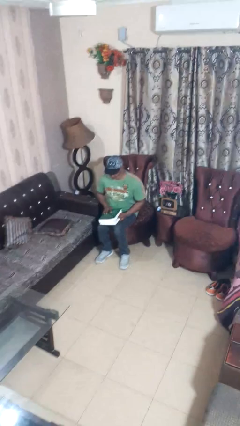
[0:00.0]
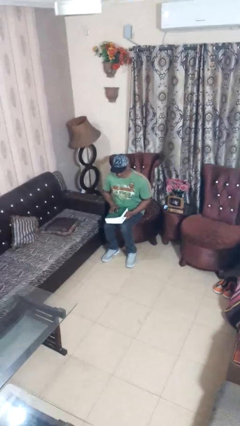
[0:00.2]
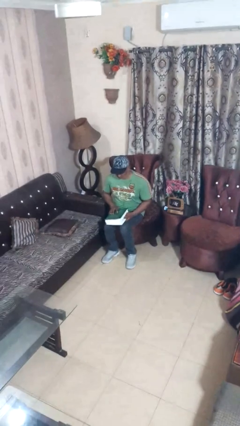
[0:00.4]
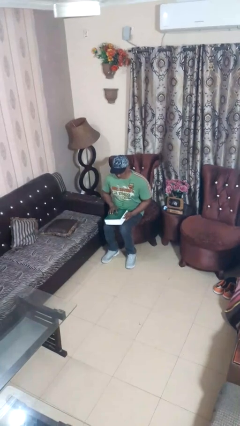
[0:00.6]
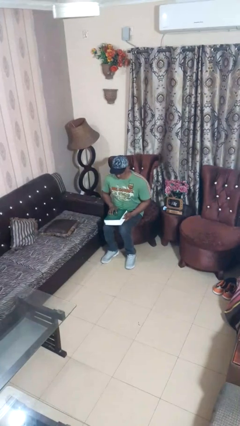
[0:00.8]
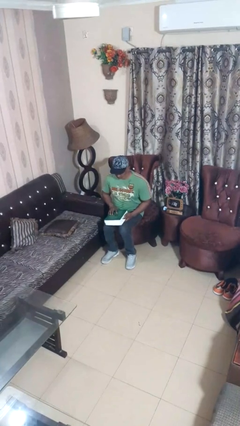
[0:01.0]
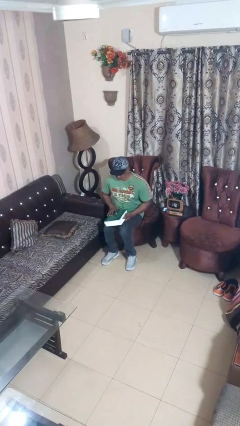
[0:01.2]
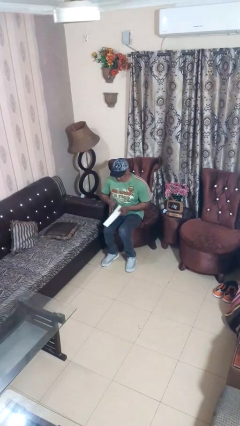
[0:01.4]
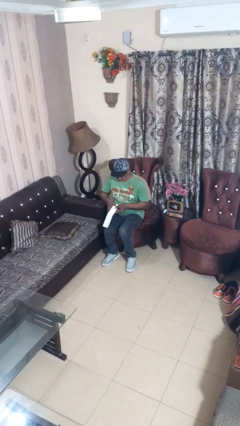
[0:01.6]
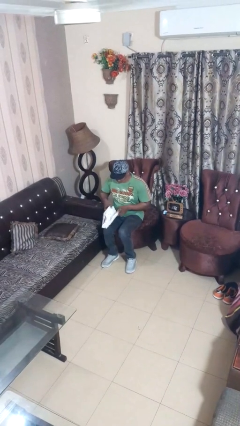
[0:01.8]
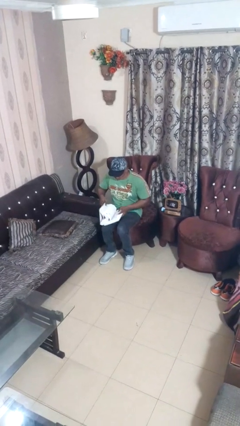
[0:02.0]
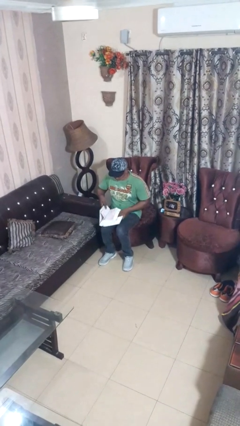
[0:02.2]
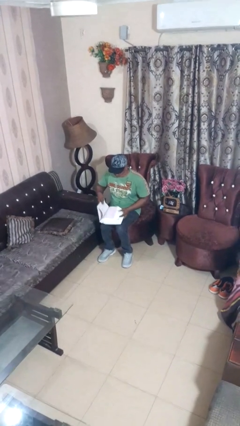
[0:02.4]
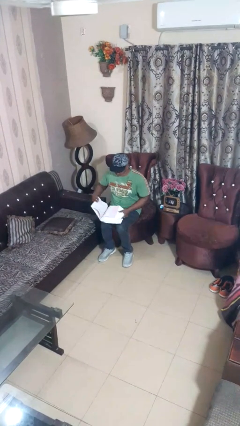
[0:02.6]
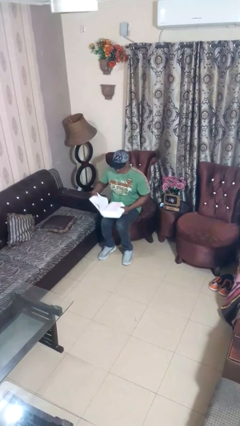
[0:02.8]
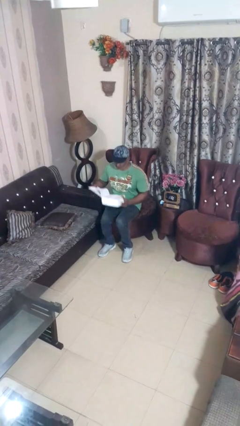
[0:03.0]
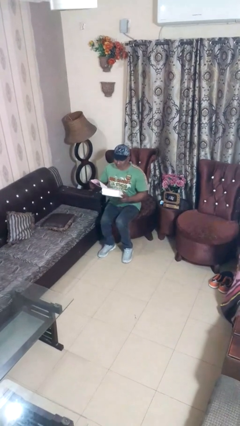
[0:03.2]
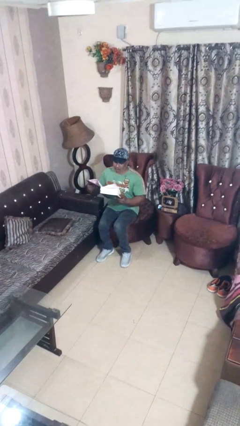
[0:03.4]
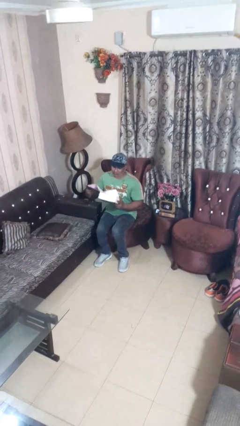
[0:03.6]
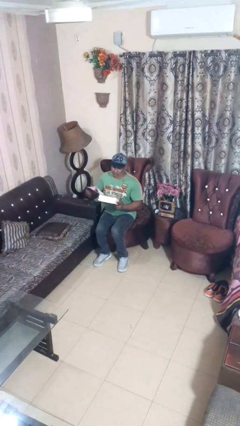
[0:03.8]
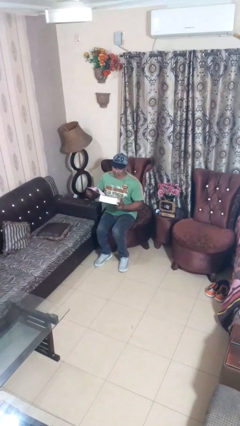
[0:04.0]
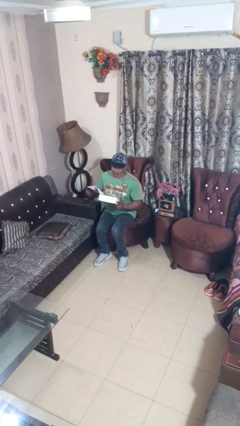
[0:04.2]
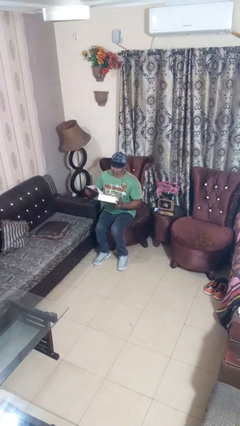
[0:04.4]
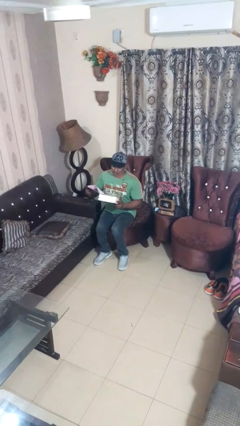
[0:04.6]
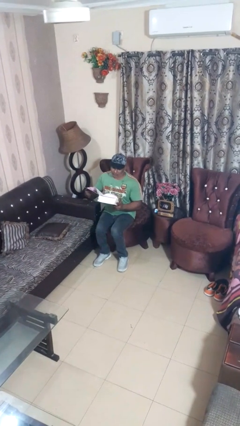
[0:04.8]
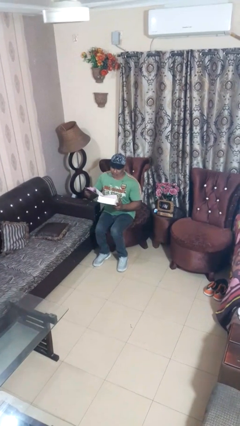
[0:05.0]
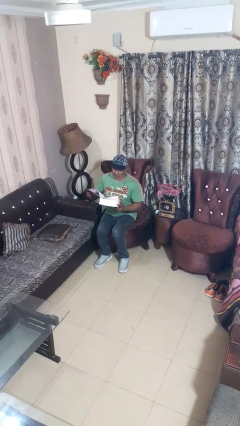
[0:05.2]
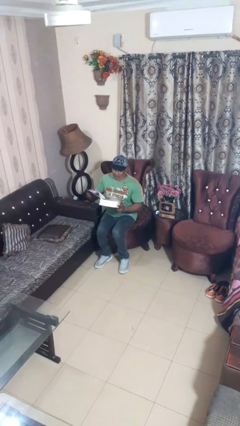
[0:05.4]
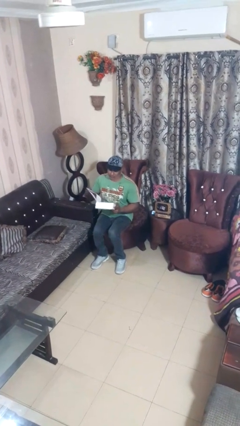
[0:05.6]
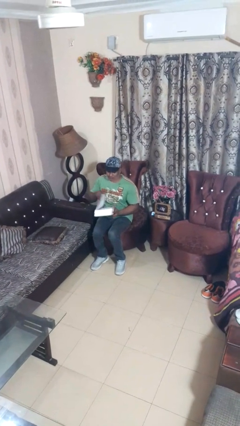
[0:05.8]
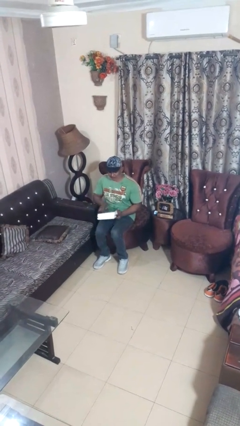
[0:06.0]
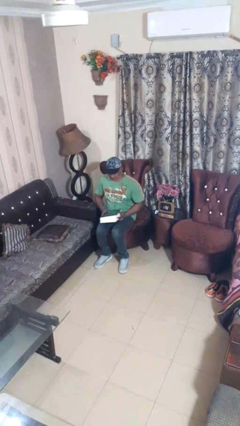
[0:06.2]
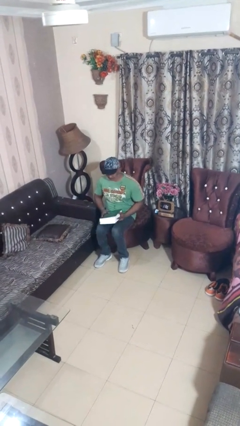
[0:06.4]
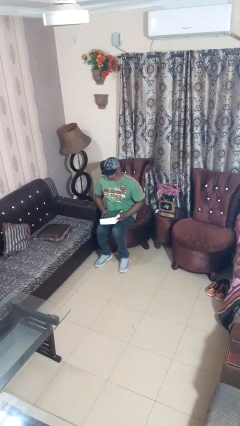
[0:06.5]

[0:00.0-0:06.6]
person reads book

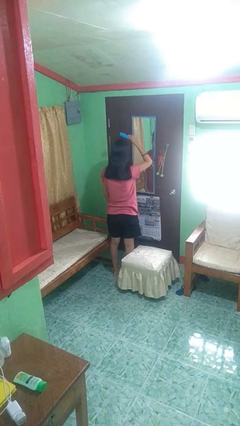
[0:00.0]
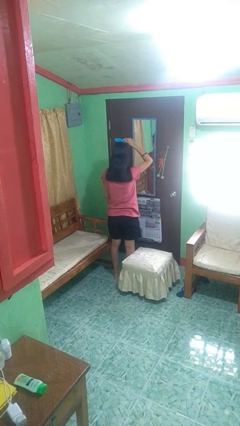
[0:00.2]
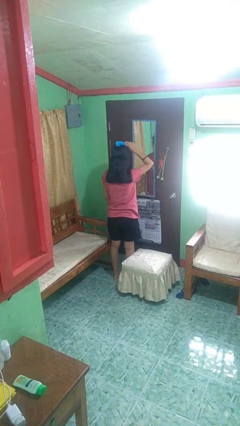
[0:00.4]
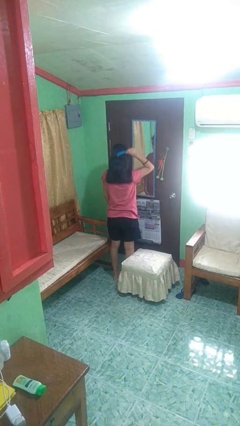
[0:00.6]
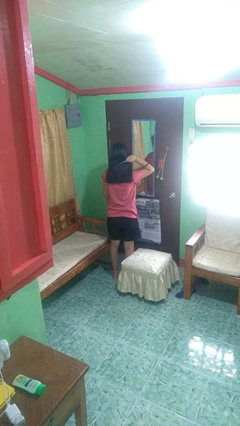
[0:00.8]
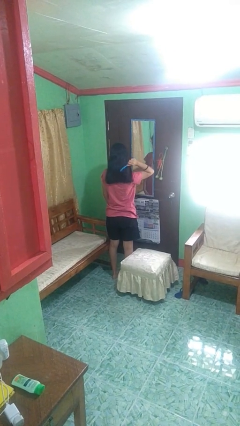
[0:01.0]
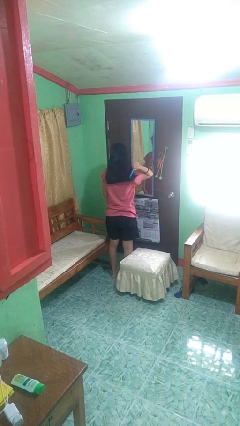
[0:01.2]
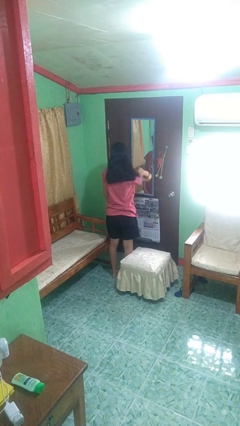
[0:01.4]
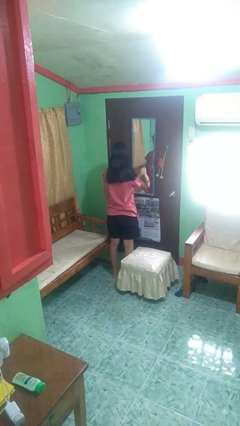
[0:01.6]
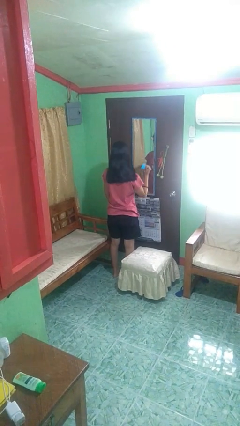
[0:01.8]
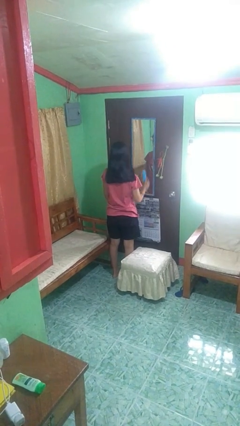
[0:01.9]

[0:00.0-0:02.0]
person brushes hair

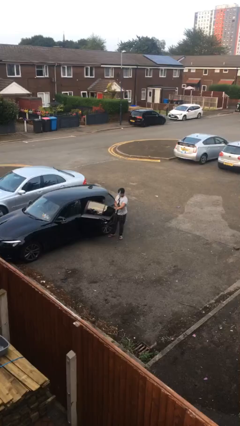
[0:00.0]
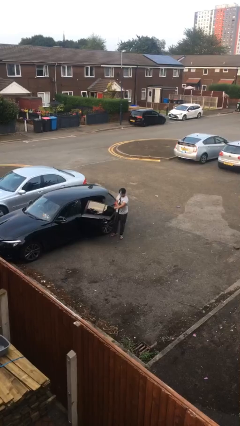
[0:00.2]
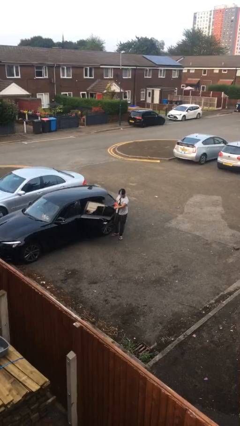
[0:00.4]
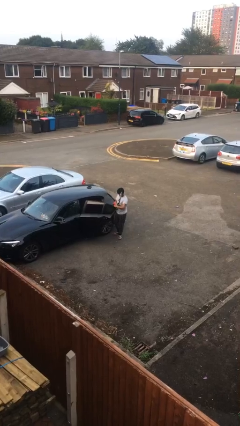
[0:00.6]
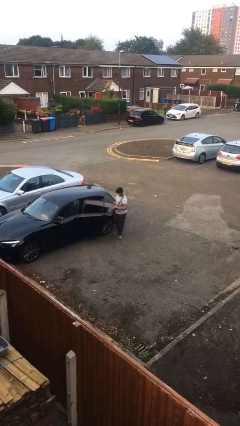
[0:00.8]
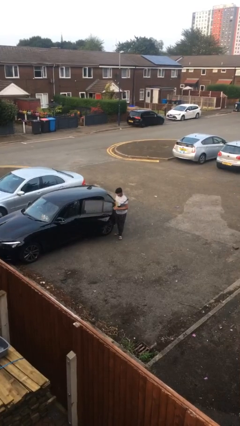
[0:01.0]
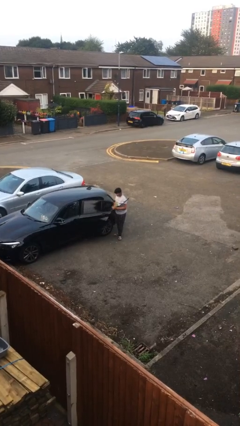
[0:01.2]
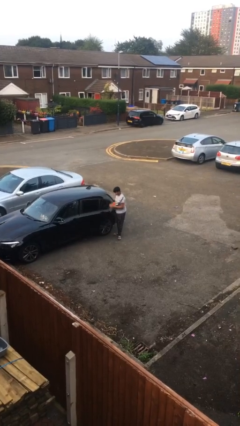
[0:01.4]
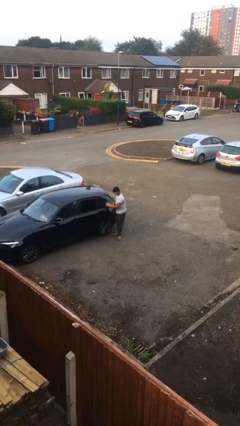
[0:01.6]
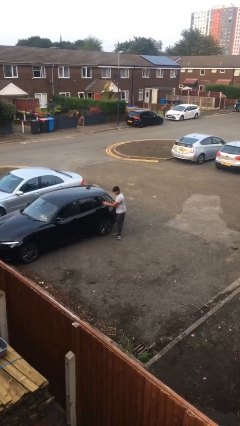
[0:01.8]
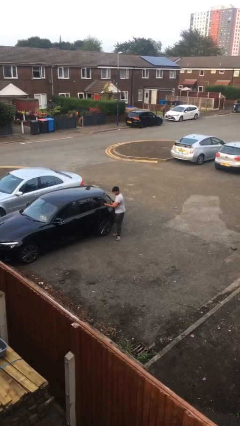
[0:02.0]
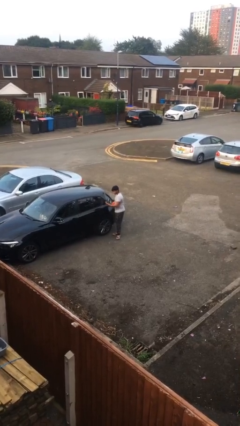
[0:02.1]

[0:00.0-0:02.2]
person closes car door

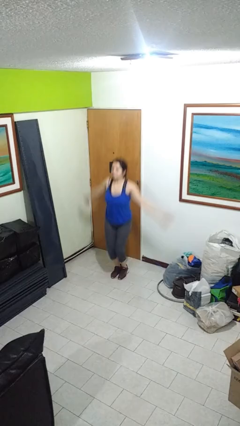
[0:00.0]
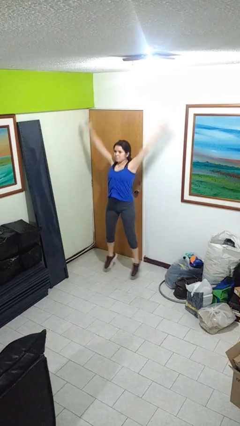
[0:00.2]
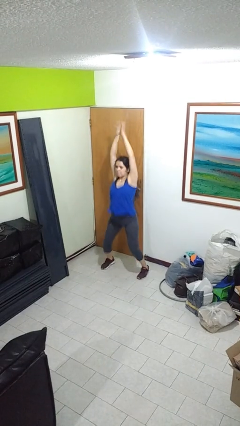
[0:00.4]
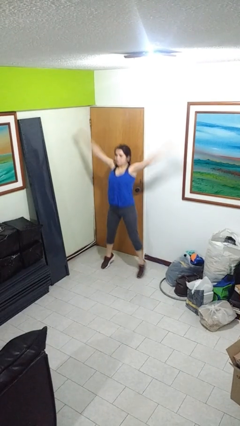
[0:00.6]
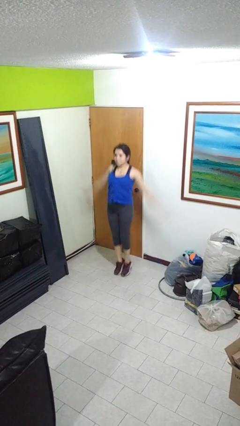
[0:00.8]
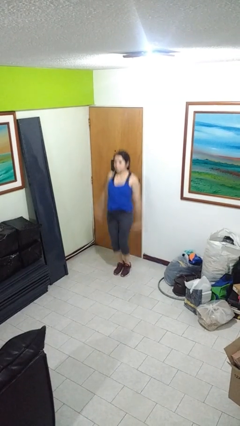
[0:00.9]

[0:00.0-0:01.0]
person exercises with jumping jacks

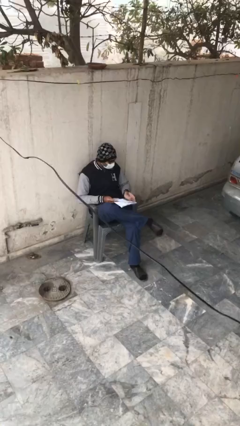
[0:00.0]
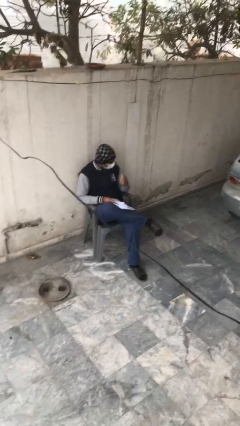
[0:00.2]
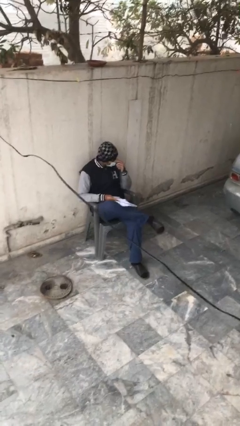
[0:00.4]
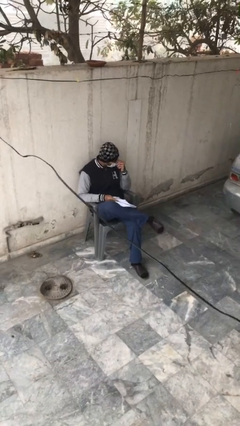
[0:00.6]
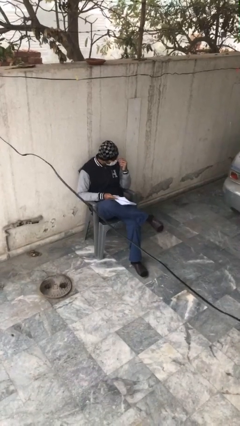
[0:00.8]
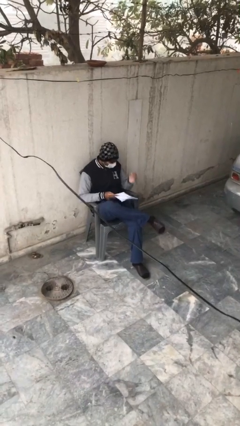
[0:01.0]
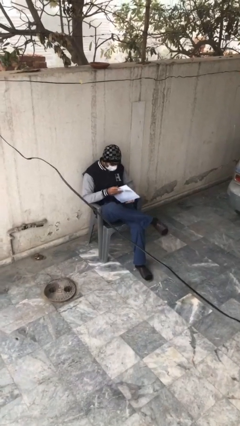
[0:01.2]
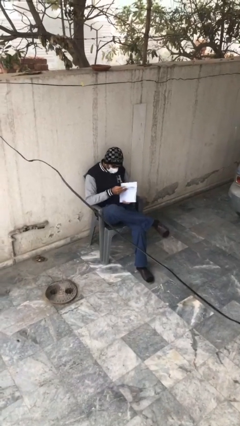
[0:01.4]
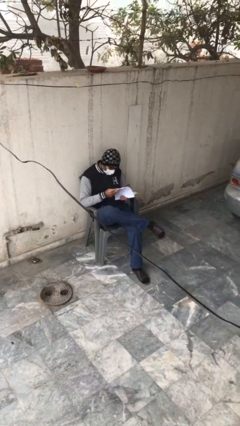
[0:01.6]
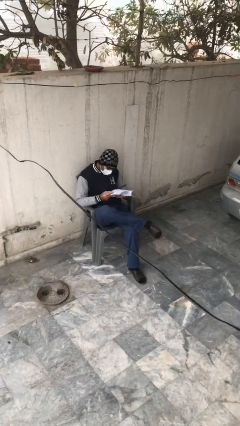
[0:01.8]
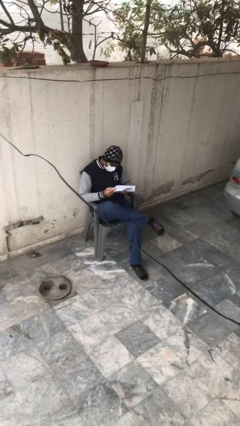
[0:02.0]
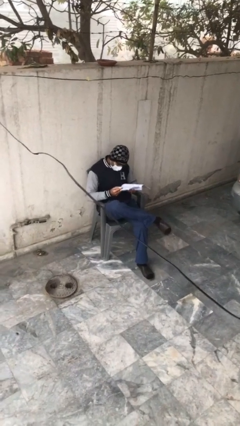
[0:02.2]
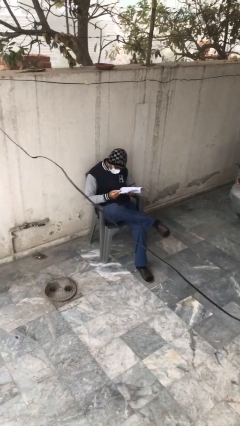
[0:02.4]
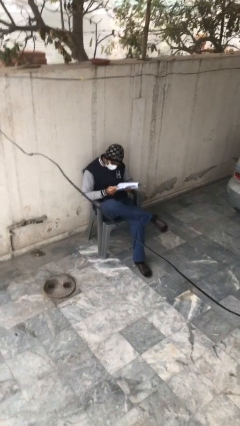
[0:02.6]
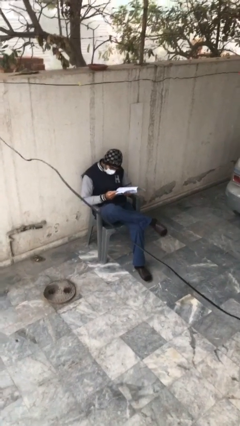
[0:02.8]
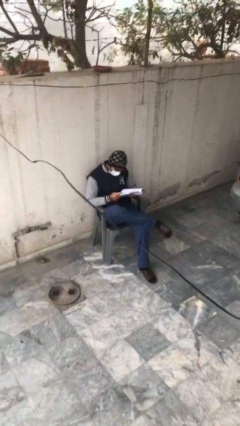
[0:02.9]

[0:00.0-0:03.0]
person reads document

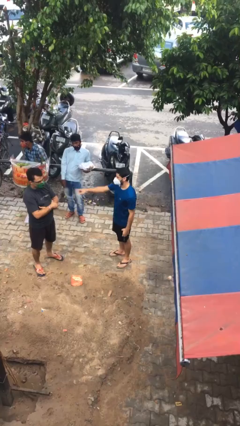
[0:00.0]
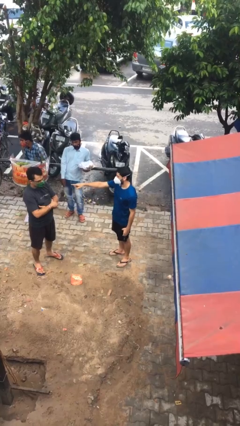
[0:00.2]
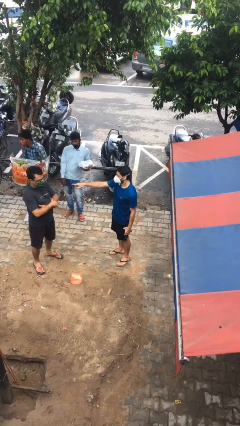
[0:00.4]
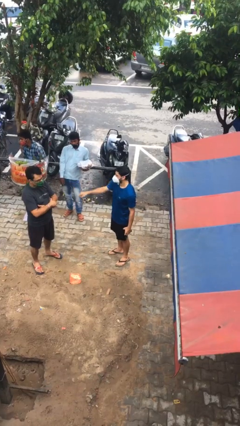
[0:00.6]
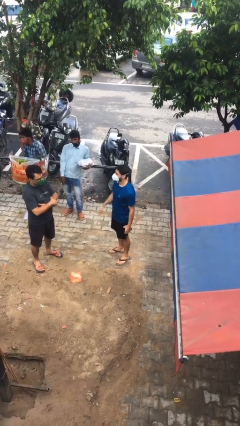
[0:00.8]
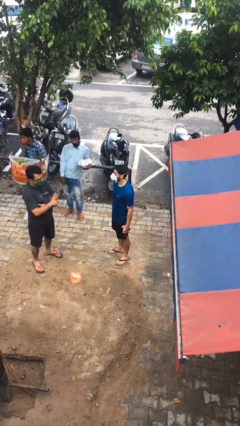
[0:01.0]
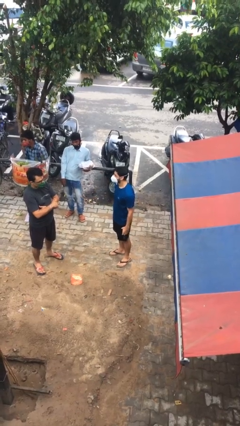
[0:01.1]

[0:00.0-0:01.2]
person points at person

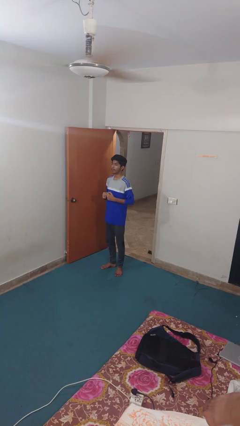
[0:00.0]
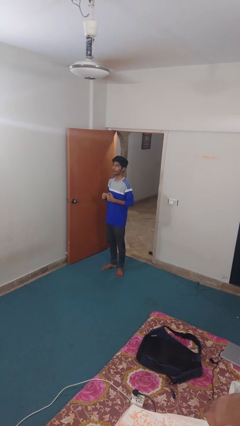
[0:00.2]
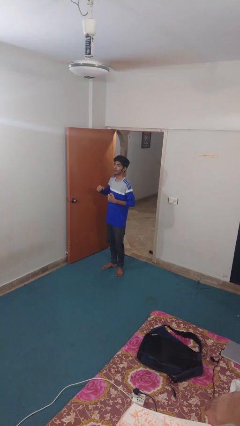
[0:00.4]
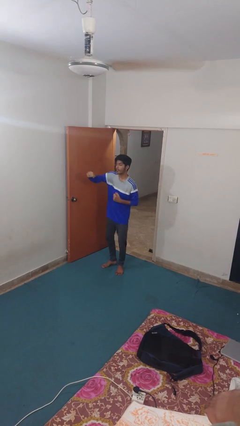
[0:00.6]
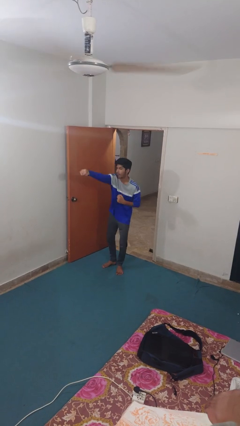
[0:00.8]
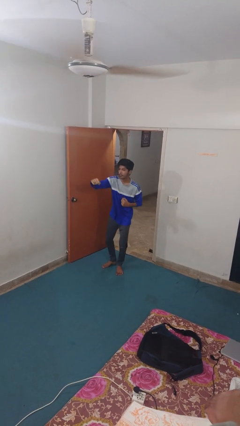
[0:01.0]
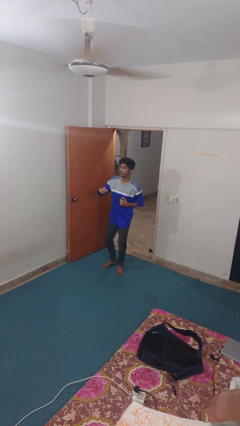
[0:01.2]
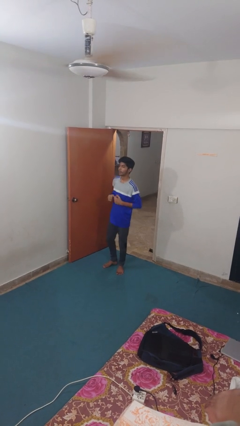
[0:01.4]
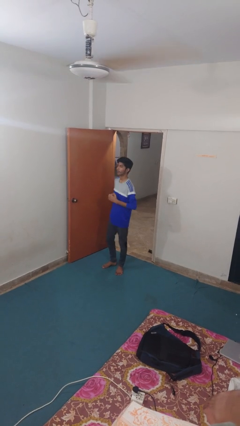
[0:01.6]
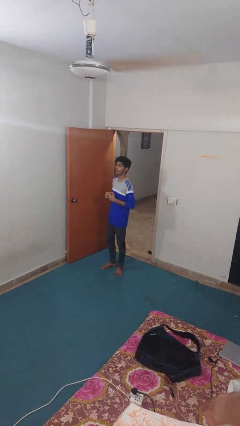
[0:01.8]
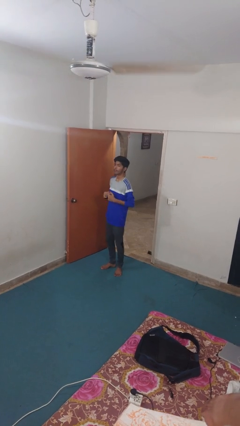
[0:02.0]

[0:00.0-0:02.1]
person punches
